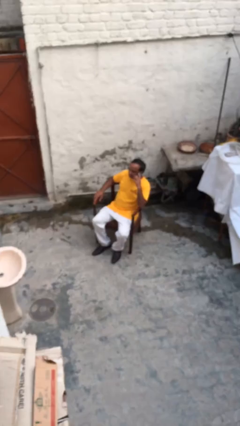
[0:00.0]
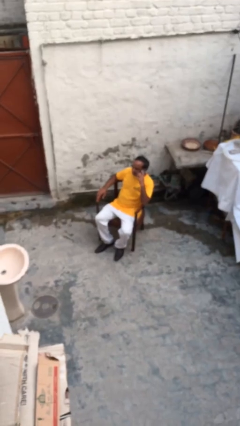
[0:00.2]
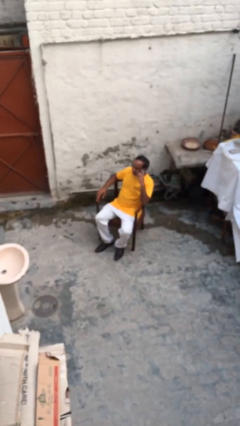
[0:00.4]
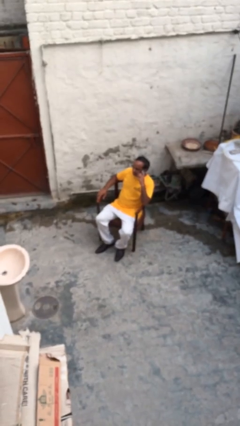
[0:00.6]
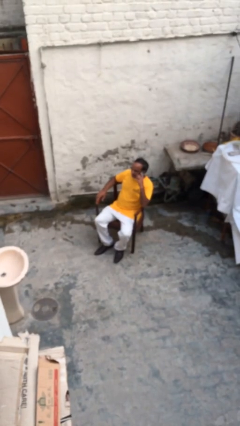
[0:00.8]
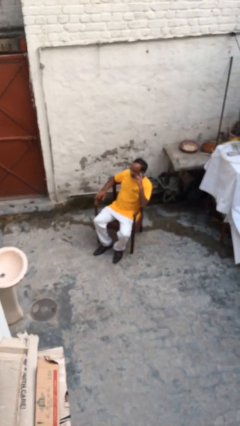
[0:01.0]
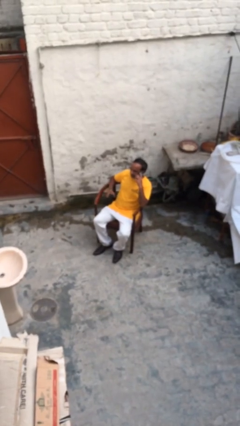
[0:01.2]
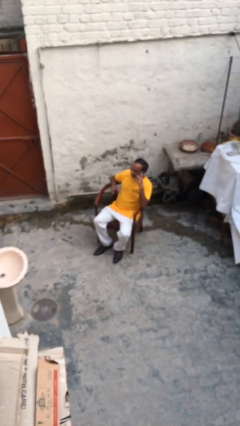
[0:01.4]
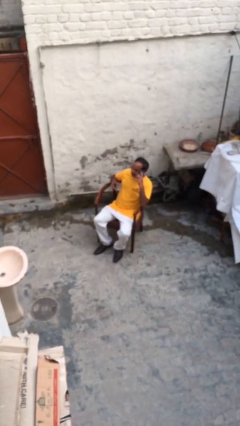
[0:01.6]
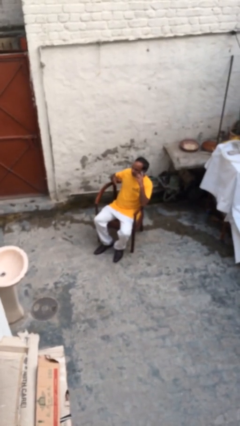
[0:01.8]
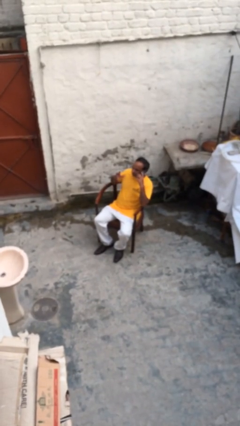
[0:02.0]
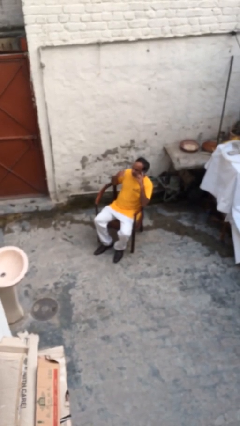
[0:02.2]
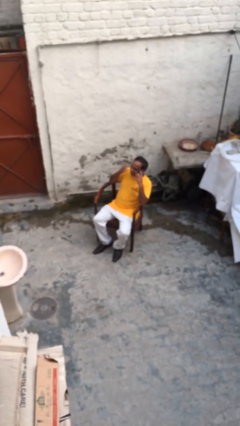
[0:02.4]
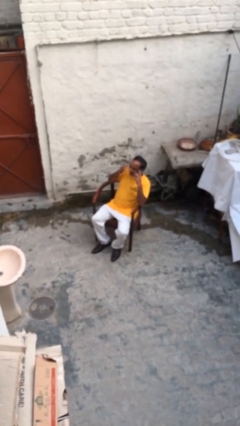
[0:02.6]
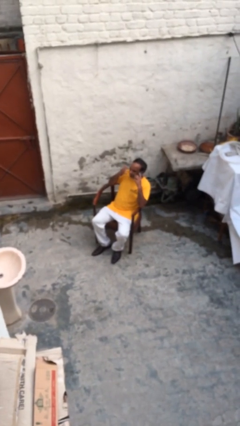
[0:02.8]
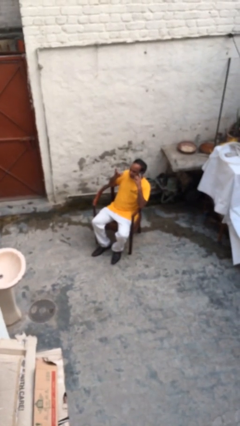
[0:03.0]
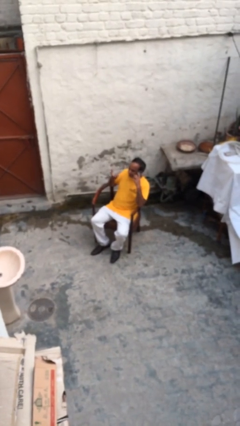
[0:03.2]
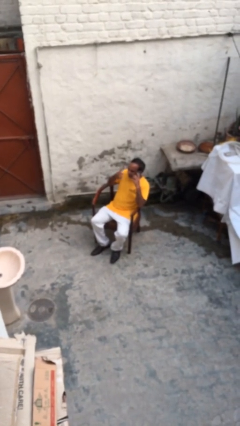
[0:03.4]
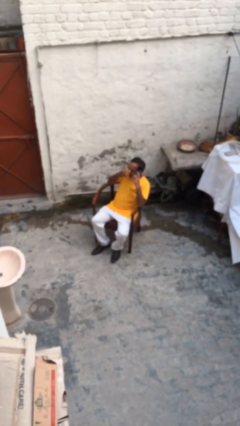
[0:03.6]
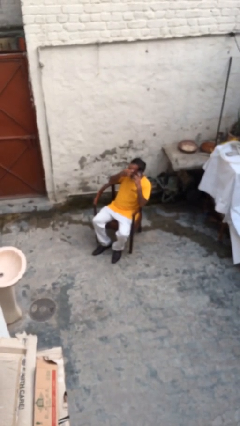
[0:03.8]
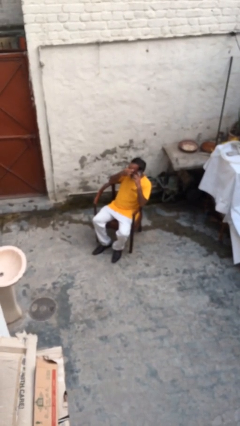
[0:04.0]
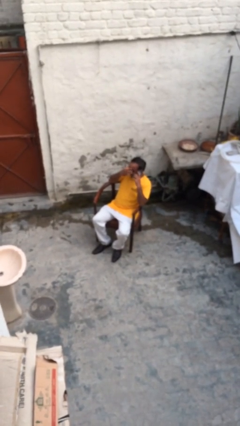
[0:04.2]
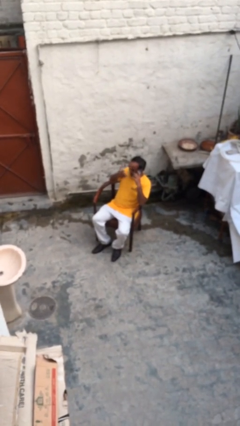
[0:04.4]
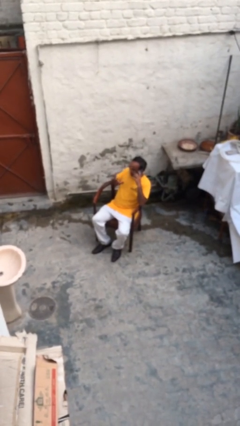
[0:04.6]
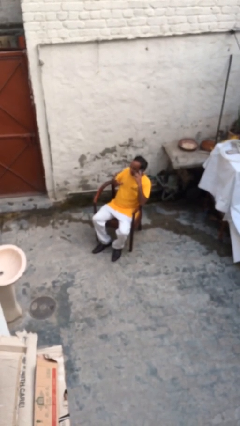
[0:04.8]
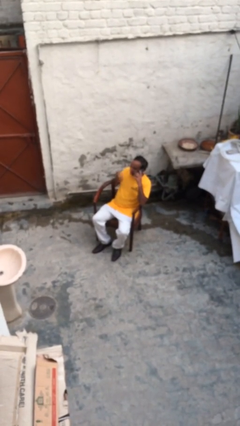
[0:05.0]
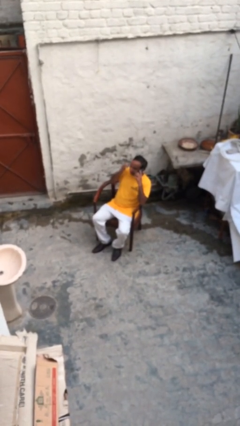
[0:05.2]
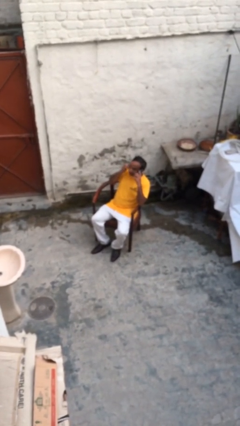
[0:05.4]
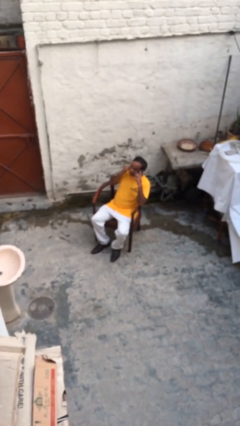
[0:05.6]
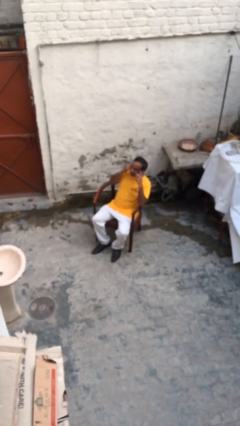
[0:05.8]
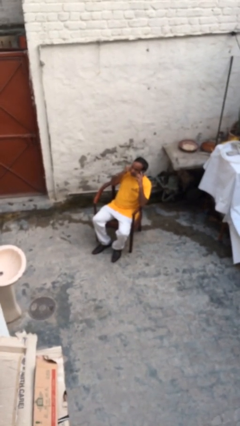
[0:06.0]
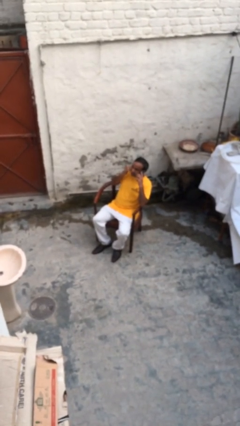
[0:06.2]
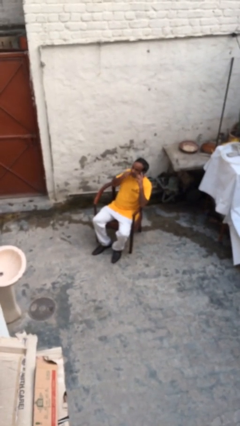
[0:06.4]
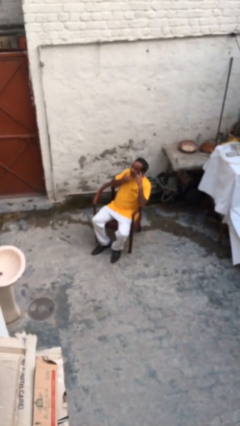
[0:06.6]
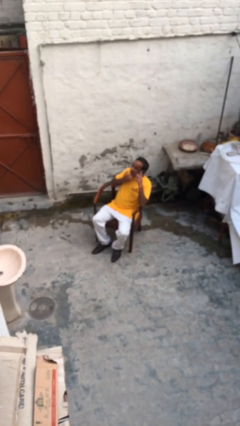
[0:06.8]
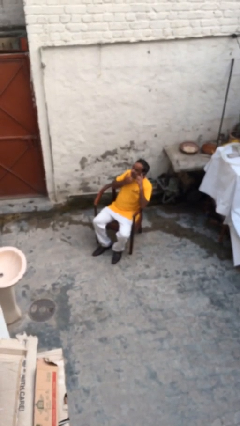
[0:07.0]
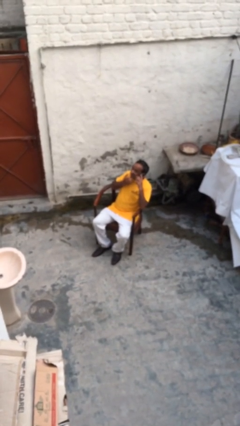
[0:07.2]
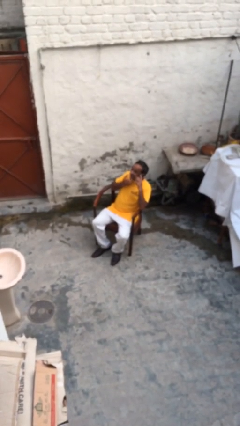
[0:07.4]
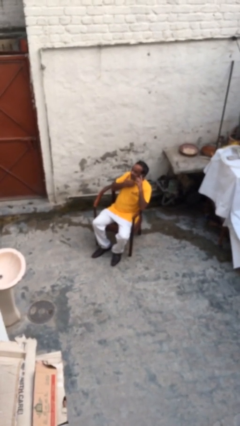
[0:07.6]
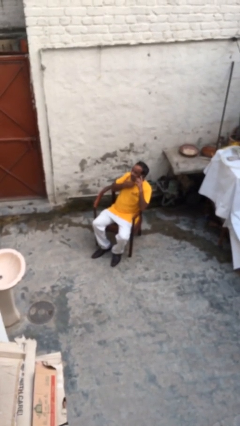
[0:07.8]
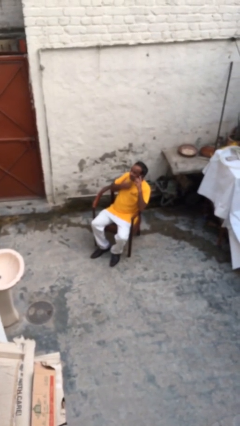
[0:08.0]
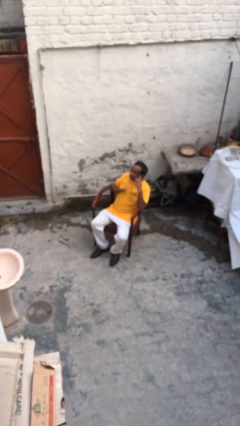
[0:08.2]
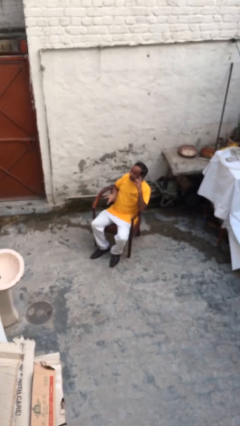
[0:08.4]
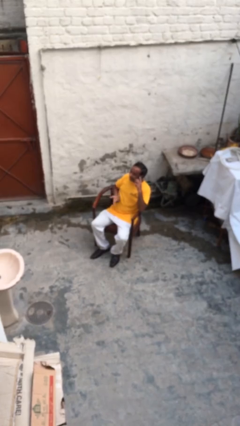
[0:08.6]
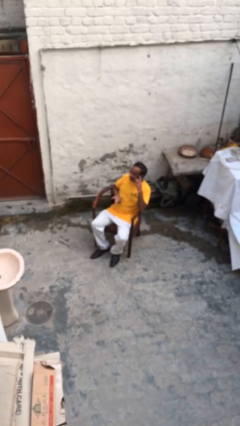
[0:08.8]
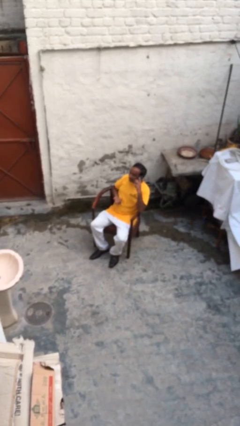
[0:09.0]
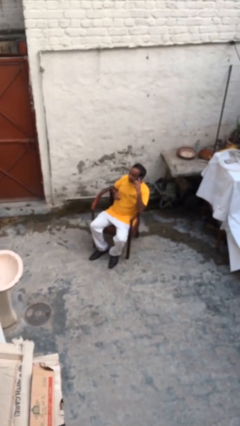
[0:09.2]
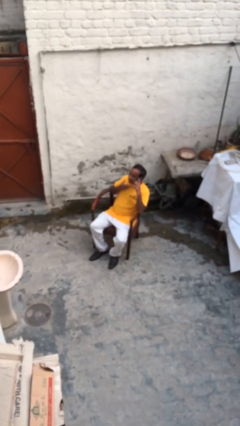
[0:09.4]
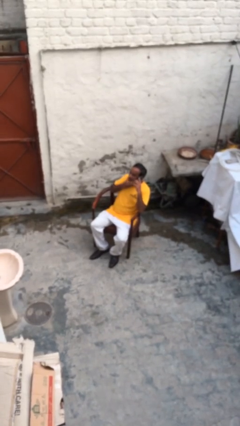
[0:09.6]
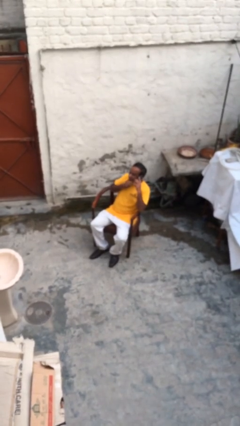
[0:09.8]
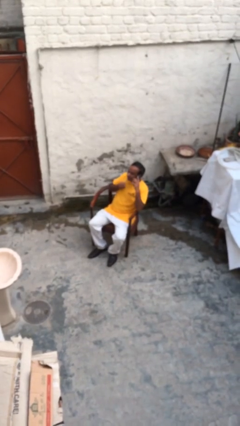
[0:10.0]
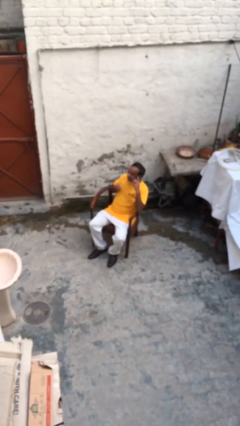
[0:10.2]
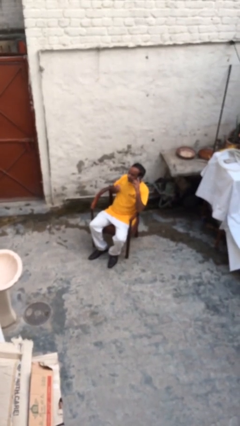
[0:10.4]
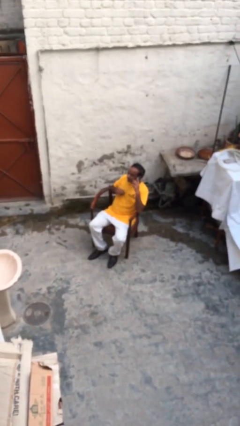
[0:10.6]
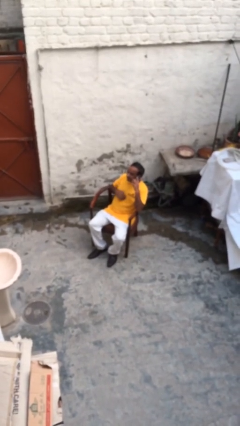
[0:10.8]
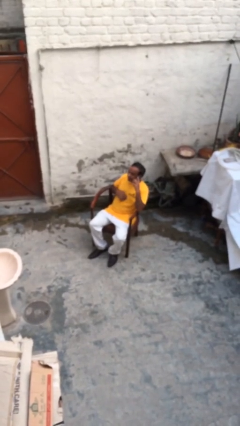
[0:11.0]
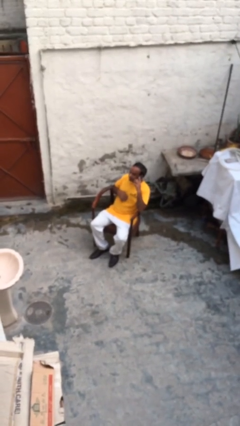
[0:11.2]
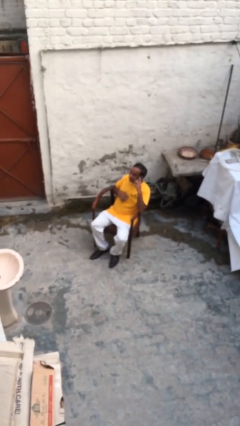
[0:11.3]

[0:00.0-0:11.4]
person talks on phone

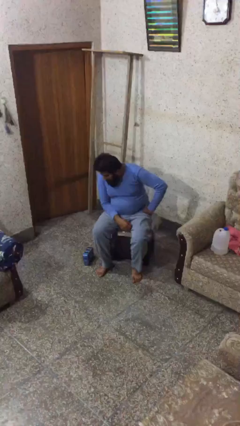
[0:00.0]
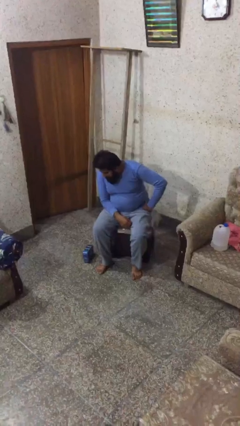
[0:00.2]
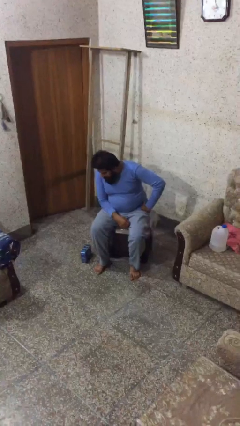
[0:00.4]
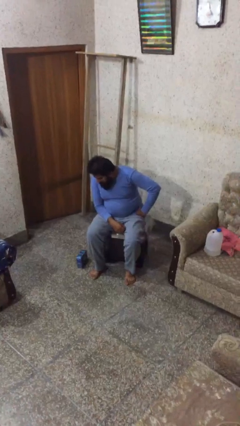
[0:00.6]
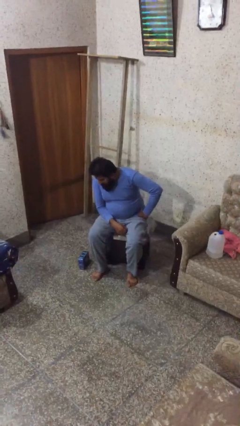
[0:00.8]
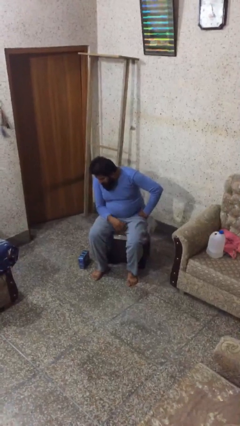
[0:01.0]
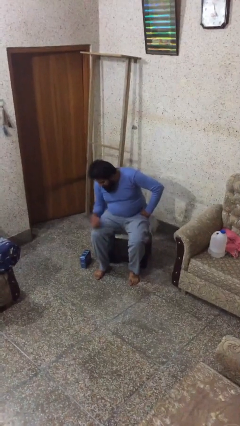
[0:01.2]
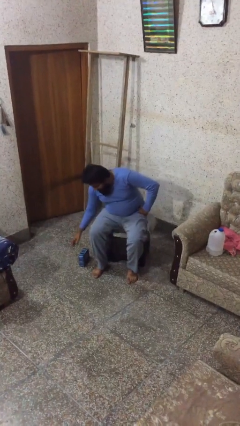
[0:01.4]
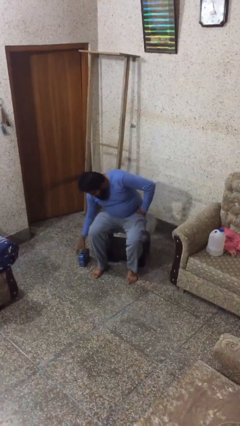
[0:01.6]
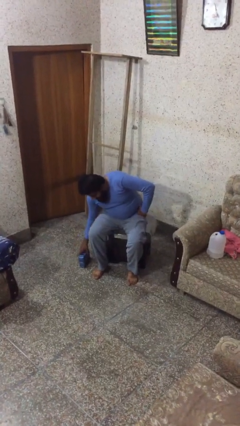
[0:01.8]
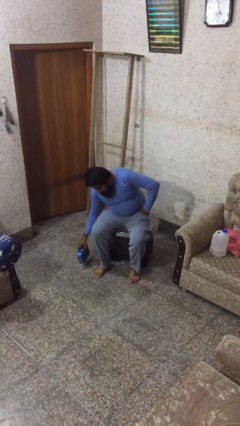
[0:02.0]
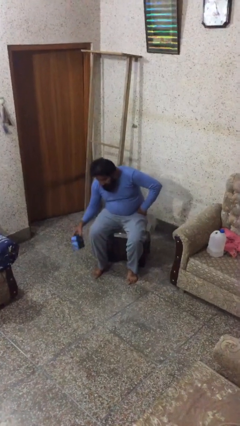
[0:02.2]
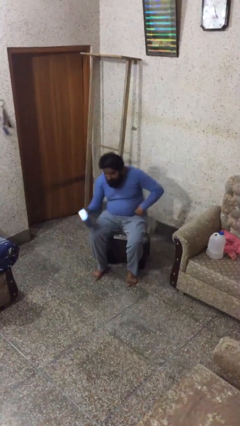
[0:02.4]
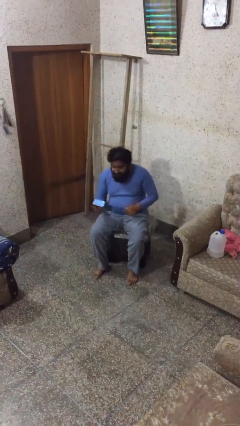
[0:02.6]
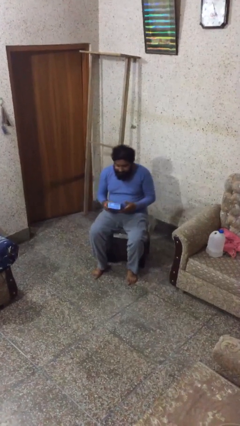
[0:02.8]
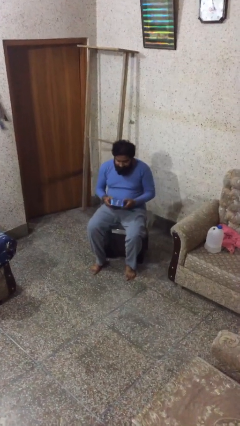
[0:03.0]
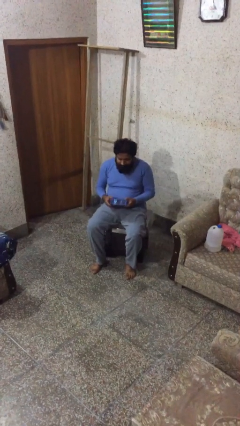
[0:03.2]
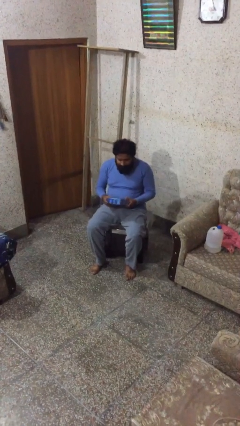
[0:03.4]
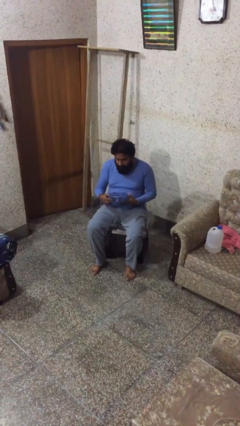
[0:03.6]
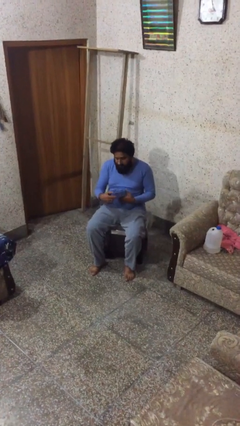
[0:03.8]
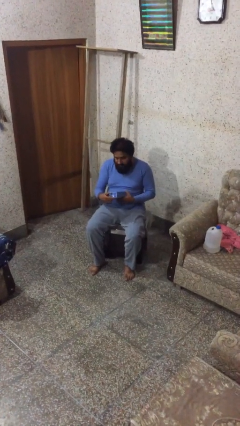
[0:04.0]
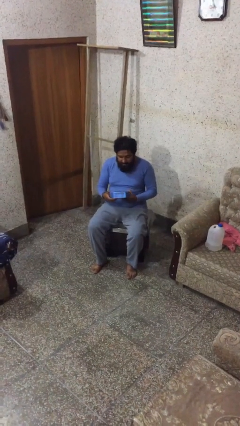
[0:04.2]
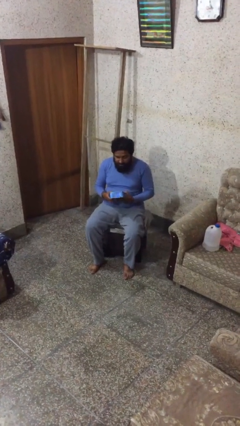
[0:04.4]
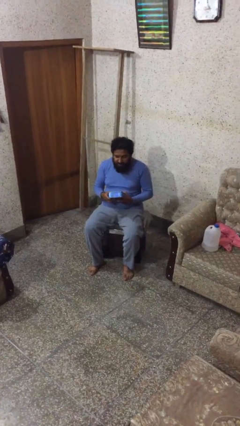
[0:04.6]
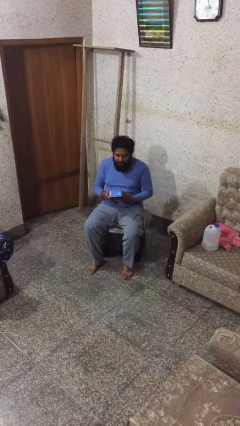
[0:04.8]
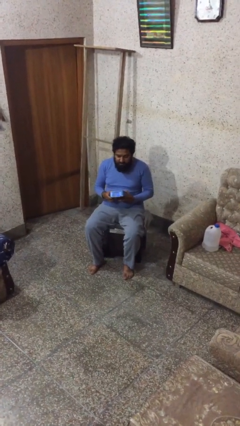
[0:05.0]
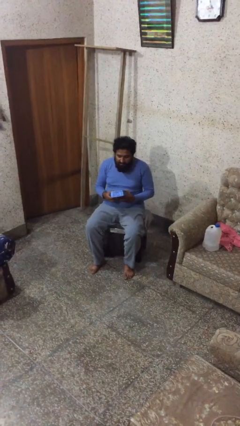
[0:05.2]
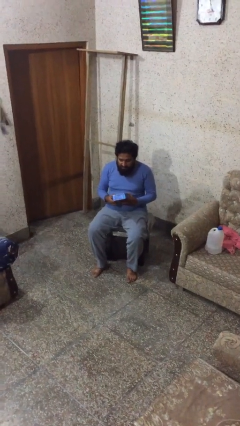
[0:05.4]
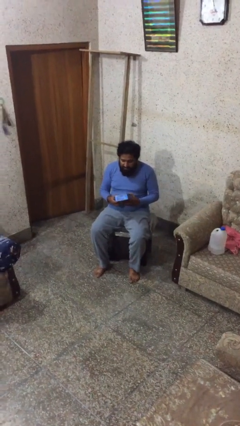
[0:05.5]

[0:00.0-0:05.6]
person picks up object from floor

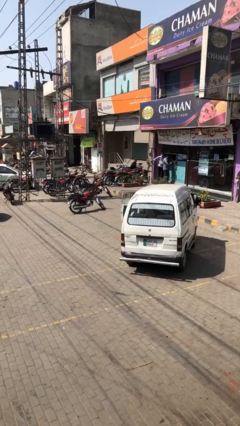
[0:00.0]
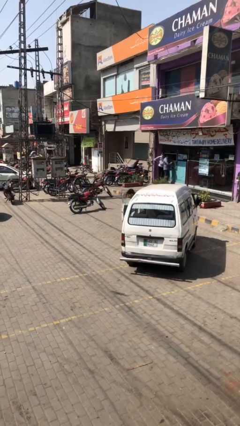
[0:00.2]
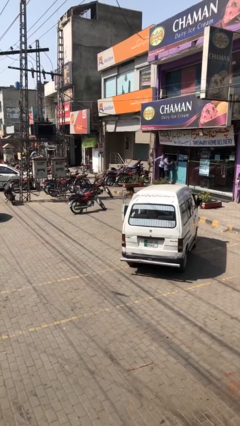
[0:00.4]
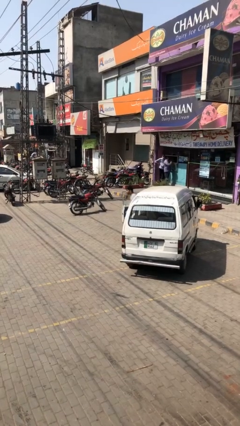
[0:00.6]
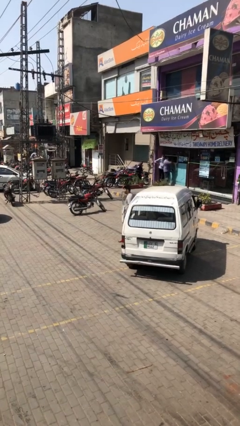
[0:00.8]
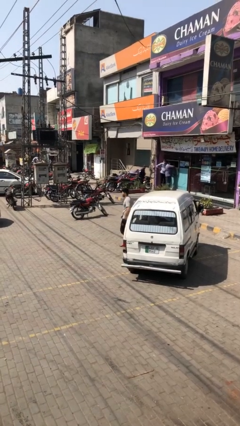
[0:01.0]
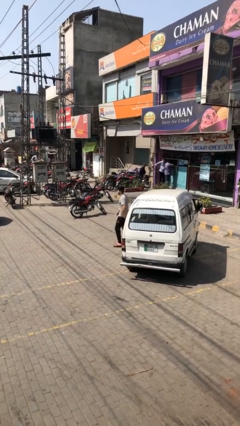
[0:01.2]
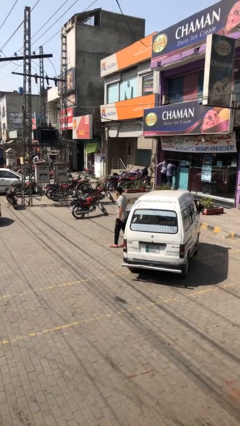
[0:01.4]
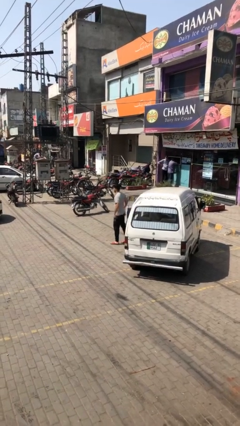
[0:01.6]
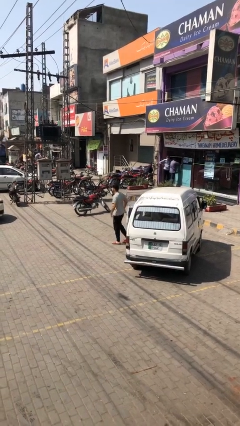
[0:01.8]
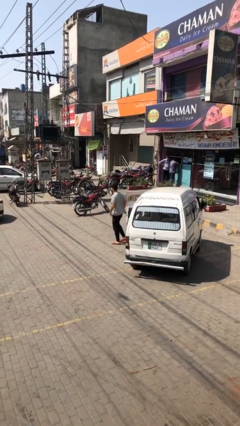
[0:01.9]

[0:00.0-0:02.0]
person exits car
